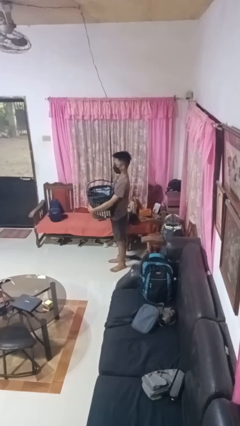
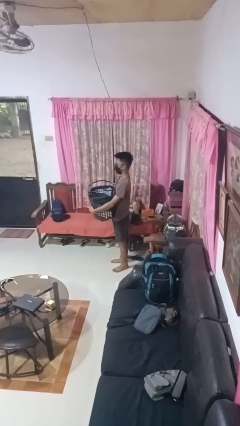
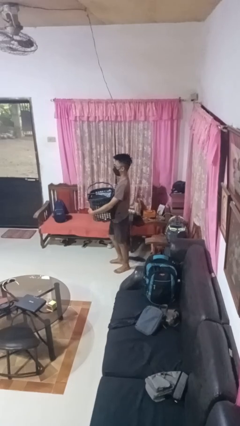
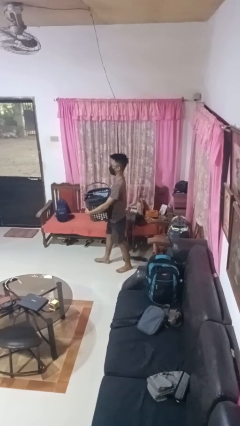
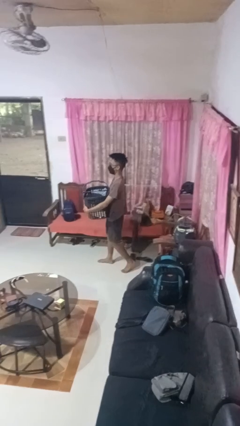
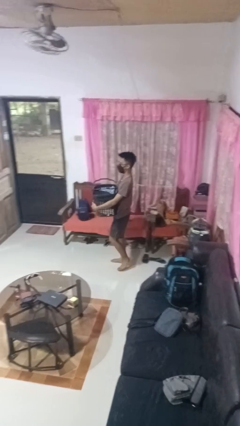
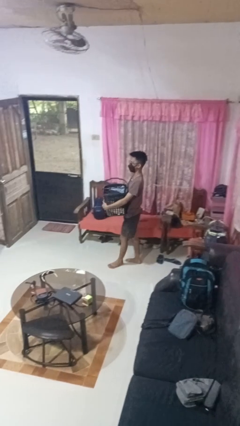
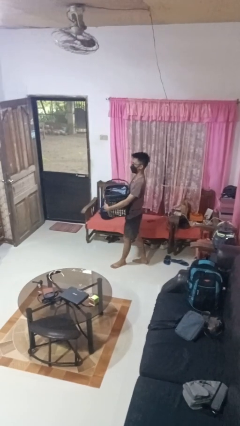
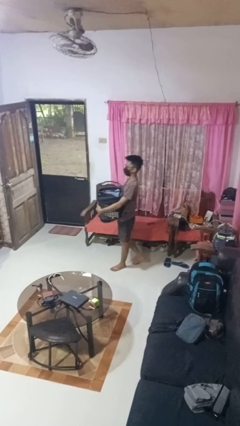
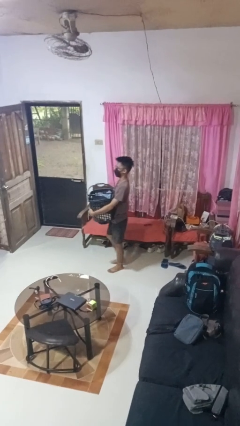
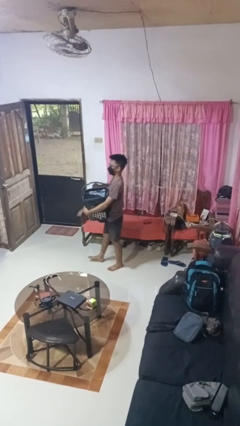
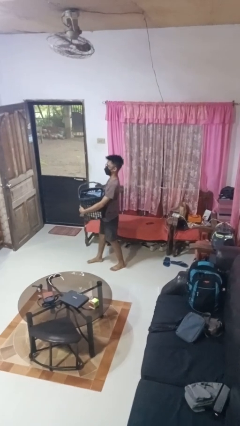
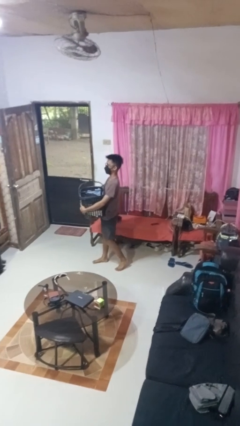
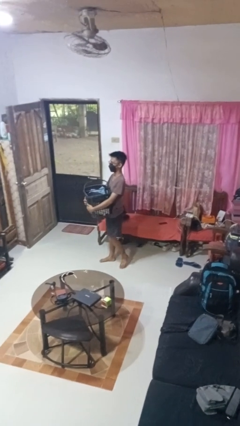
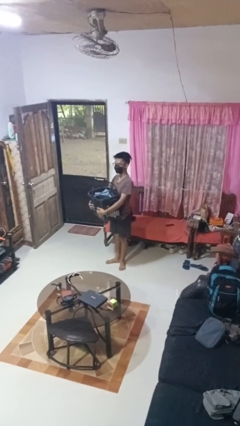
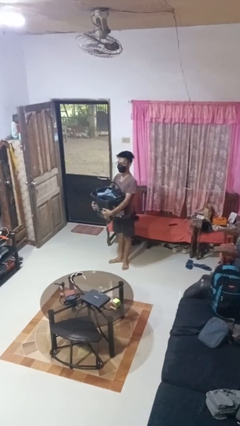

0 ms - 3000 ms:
person carries laundry basket

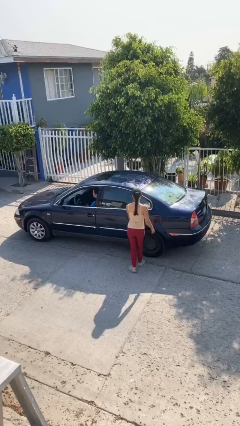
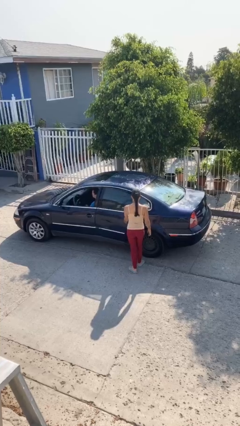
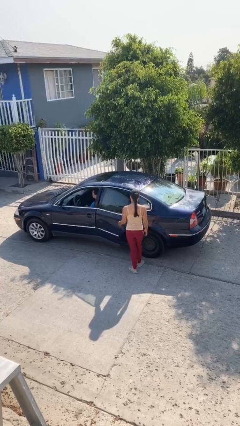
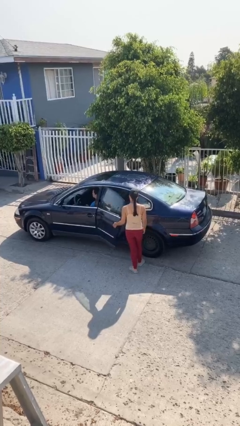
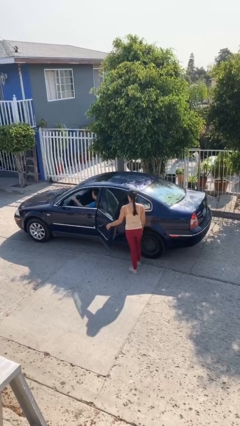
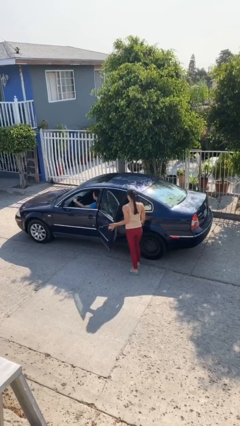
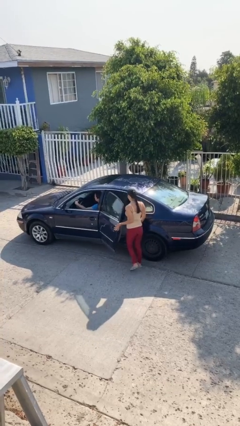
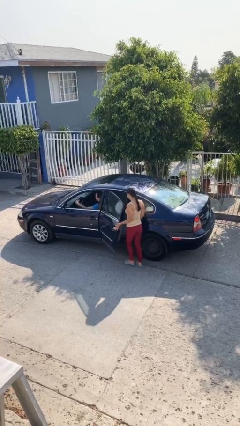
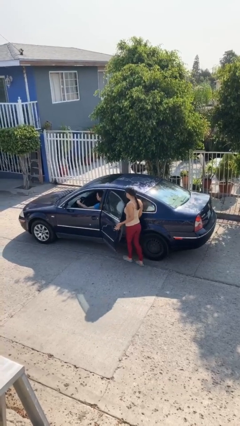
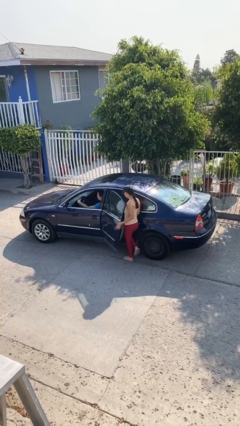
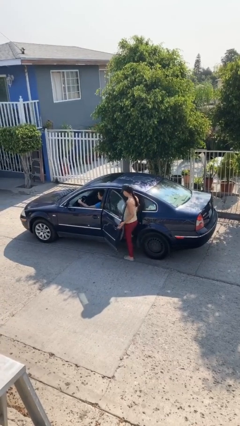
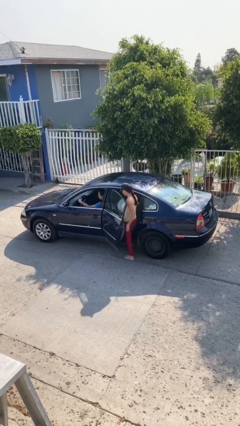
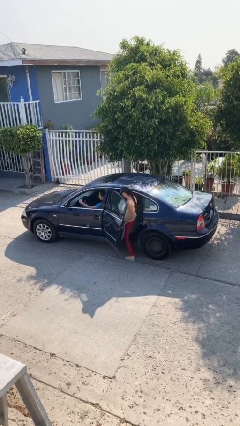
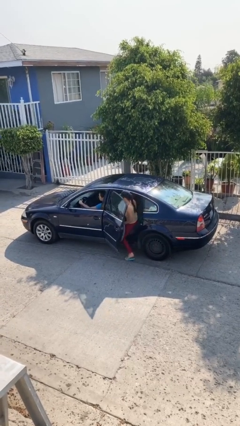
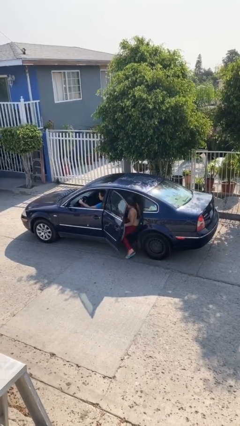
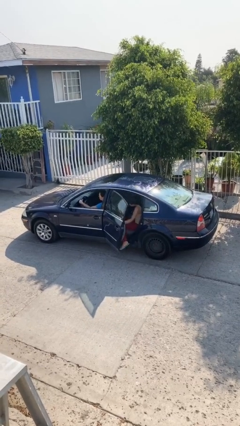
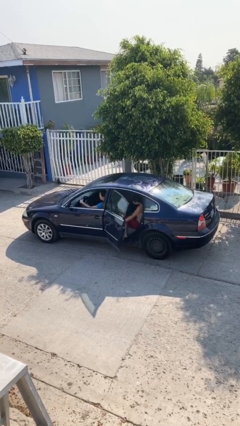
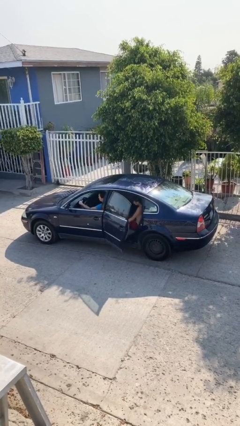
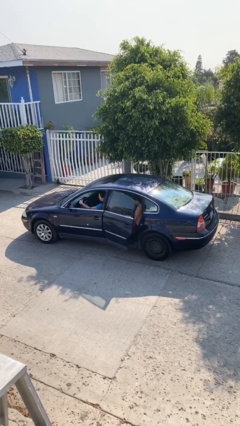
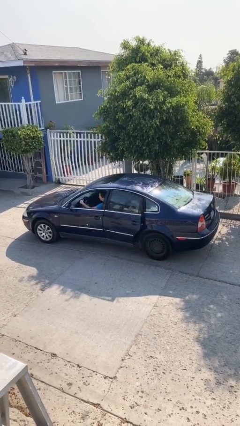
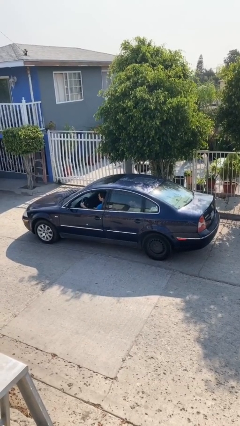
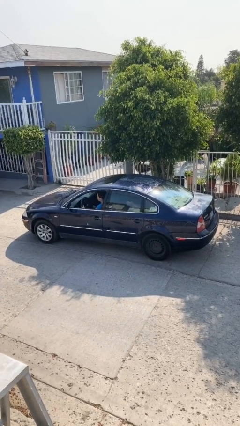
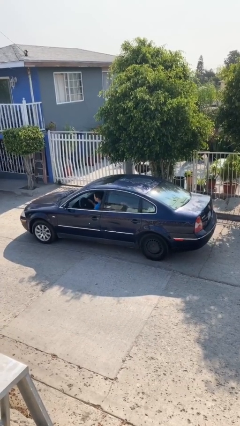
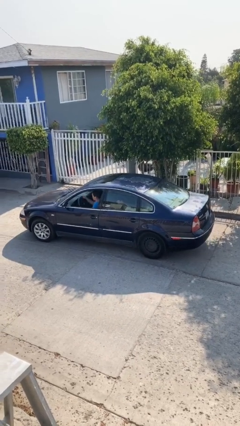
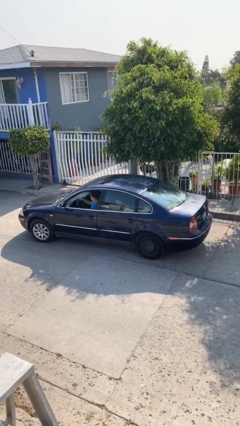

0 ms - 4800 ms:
car picks up person

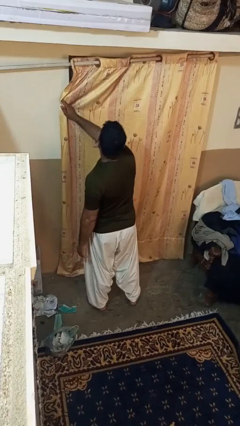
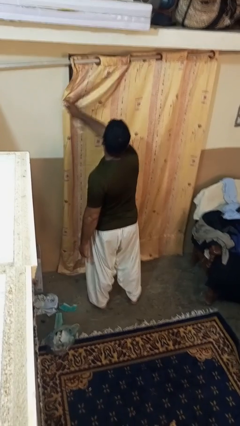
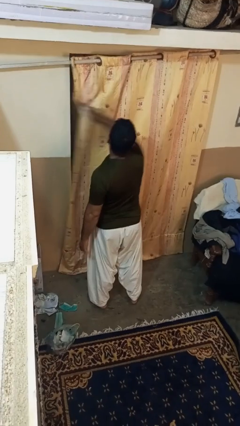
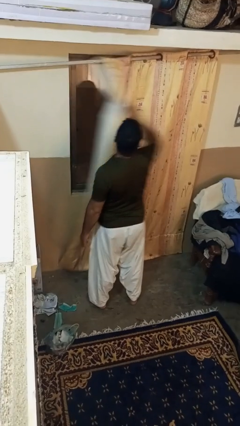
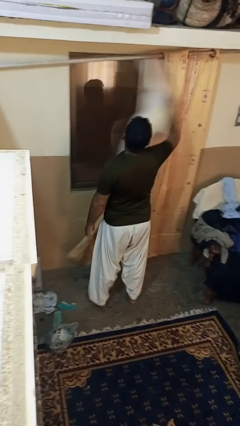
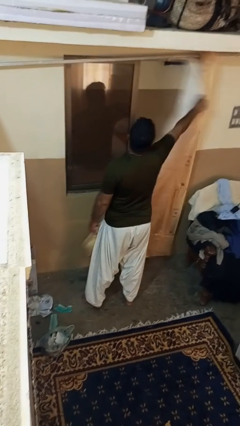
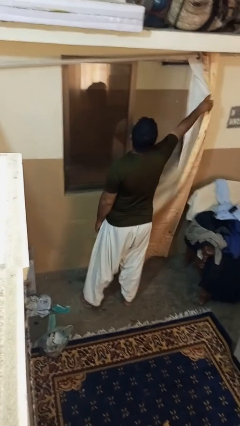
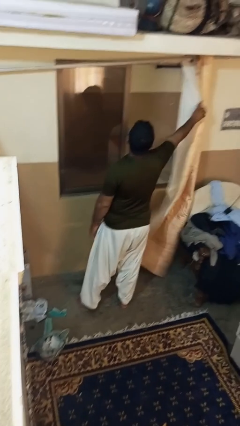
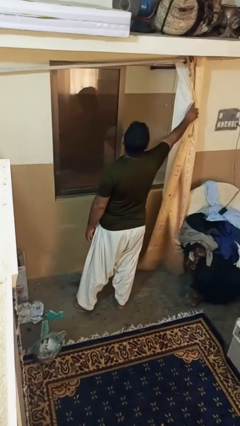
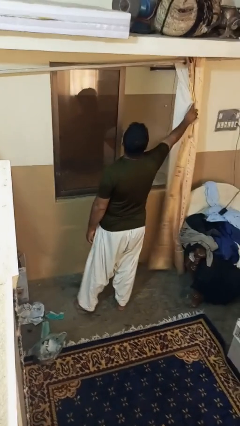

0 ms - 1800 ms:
person opens curtains

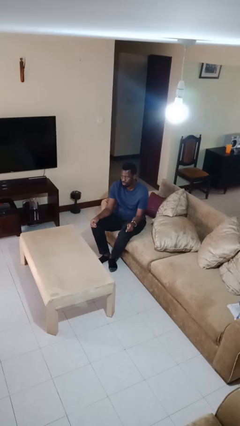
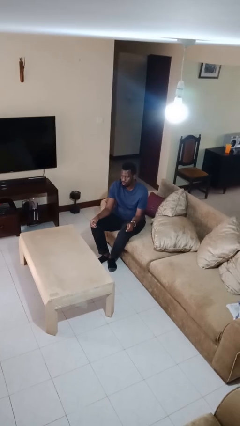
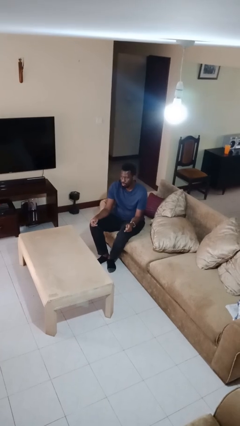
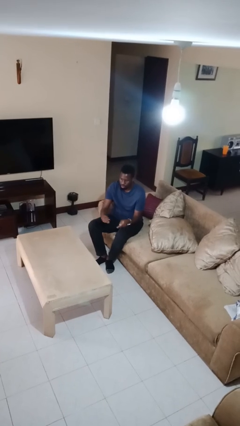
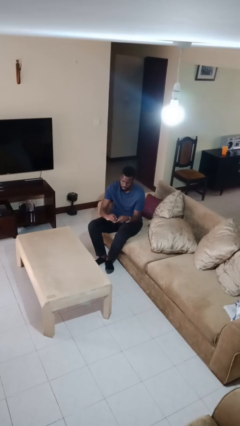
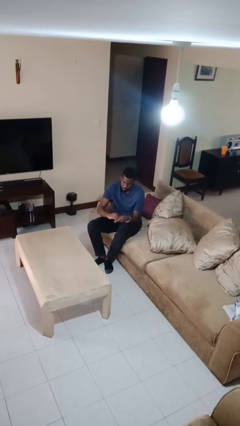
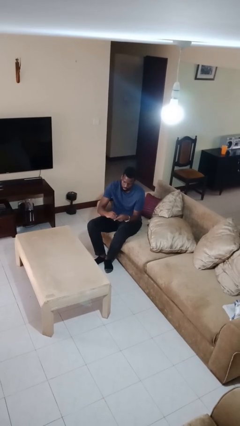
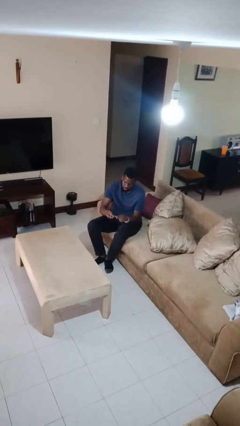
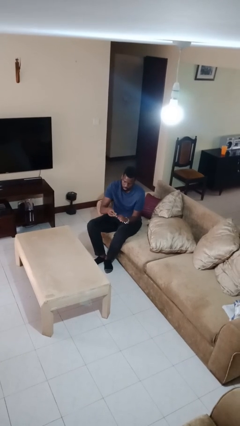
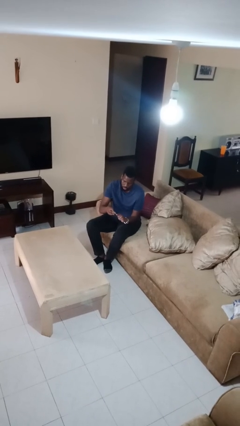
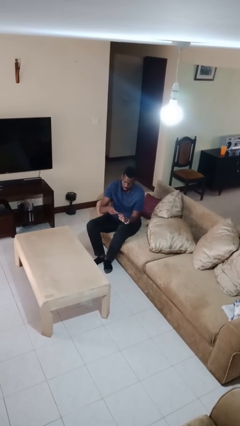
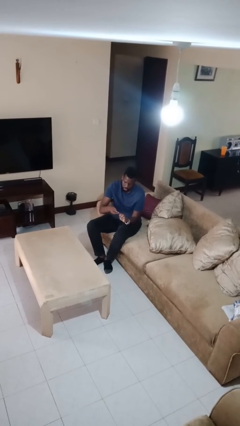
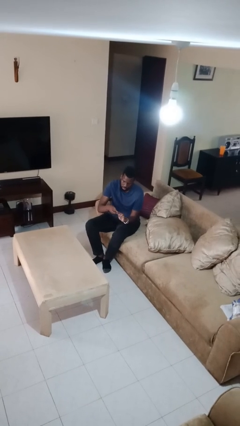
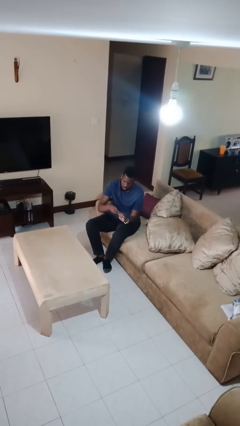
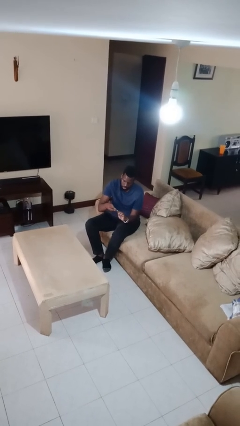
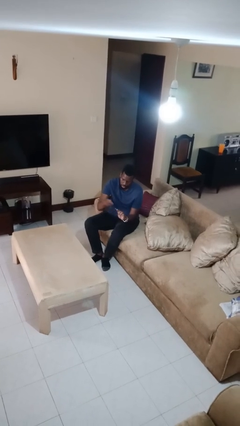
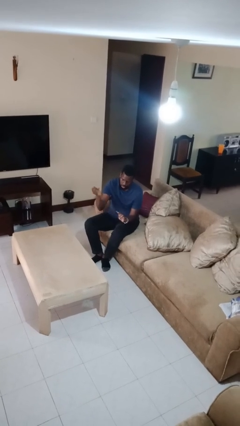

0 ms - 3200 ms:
person files fingernails

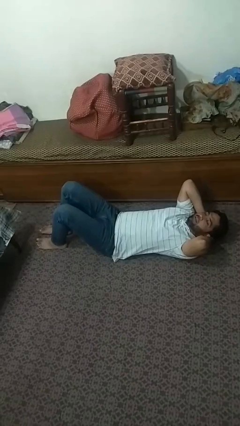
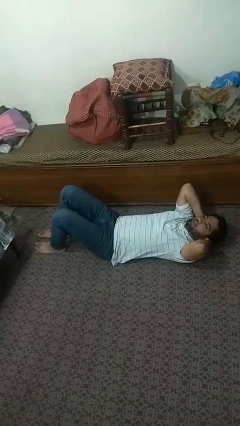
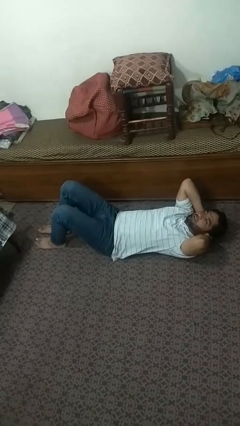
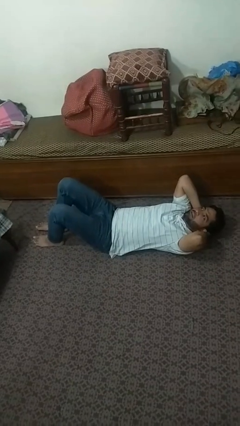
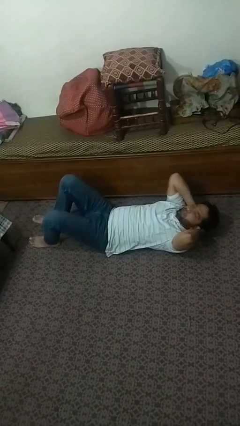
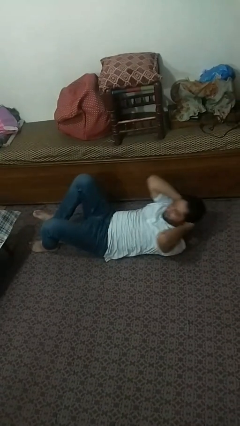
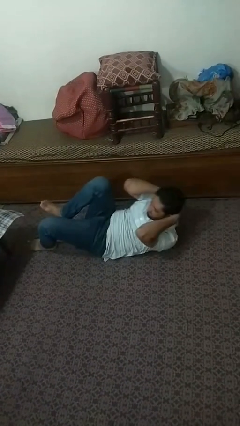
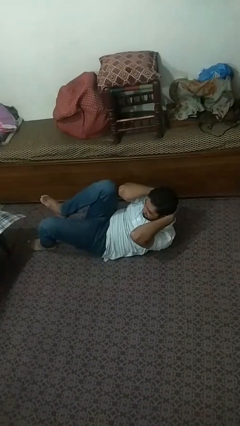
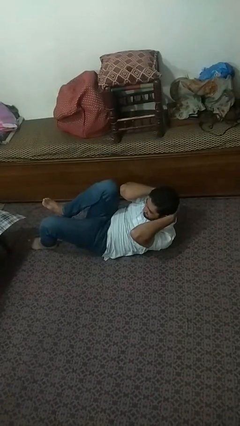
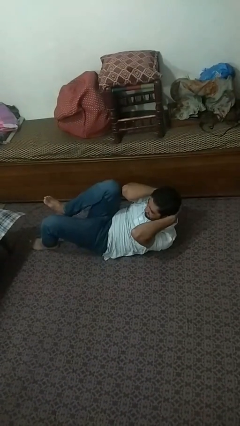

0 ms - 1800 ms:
person exercises with situp

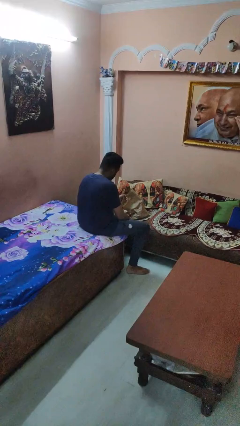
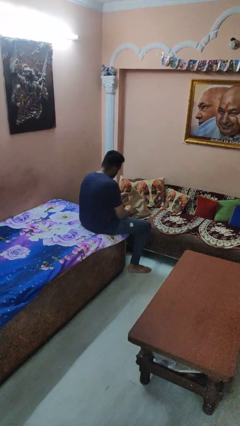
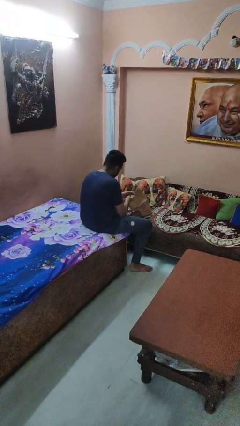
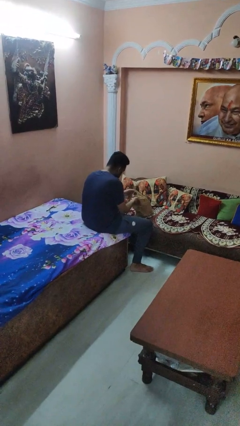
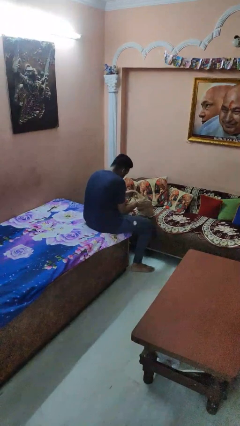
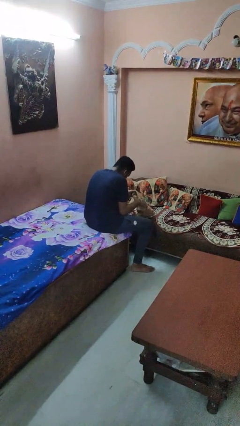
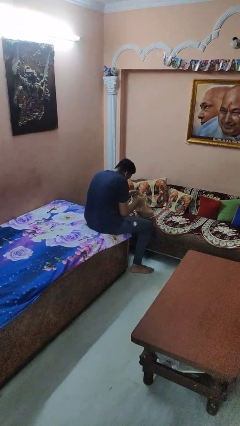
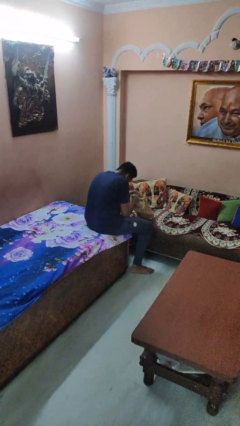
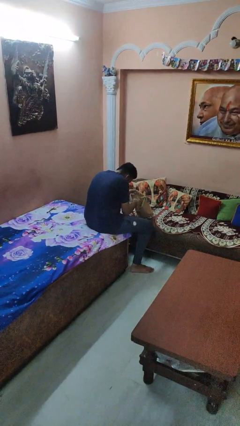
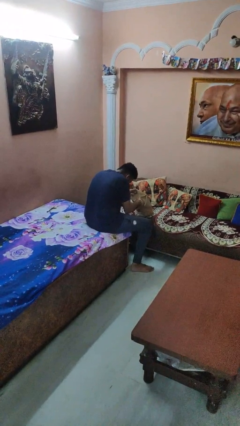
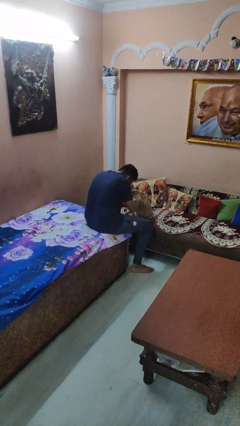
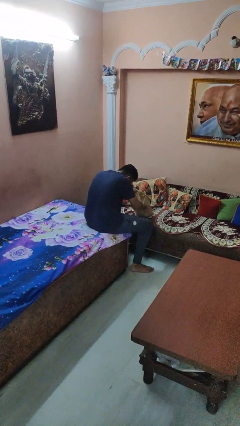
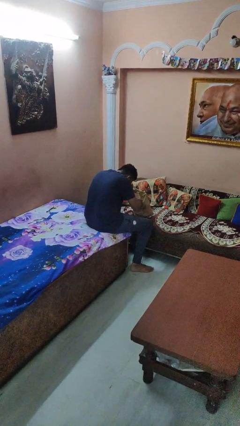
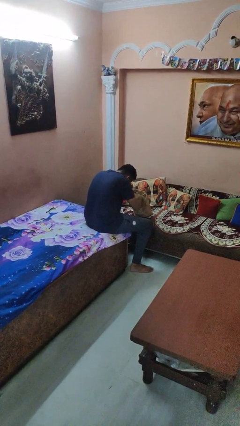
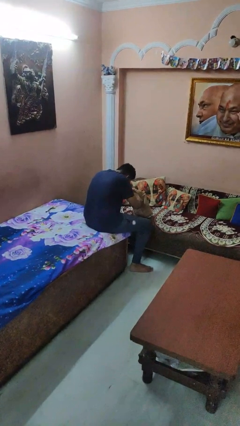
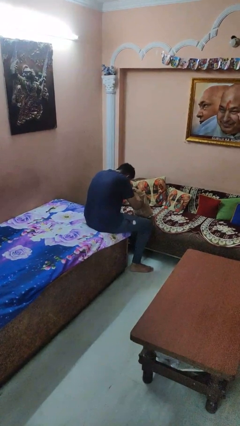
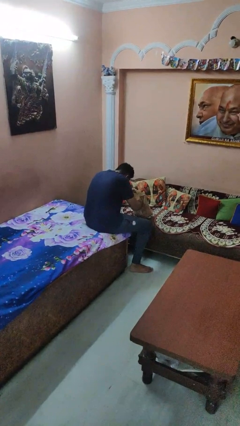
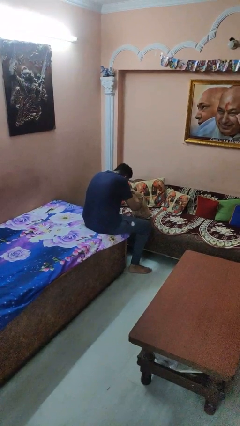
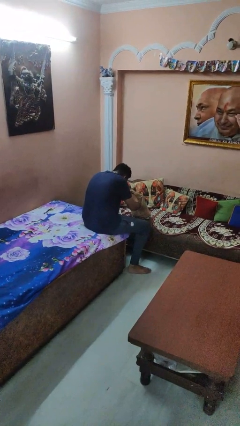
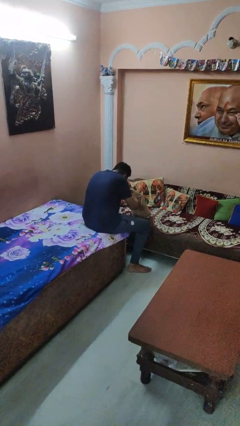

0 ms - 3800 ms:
person searches in bag
